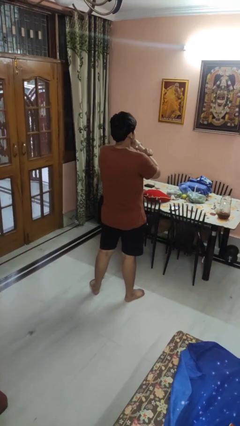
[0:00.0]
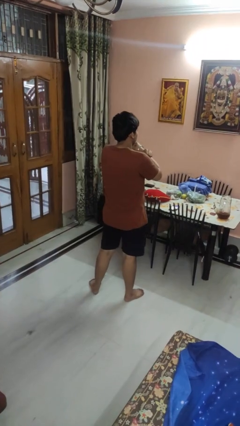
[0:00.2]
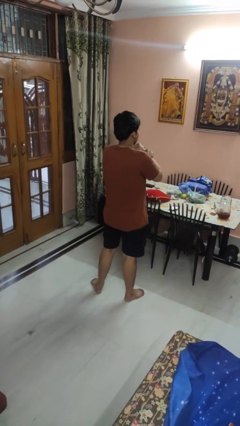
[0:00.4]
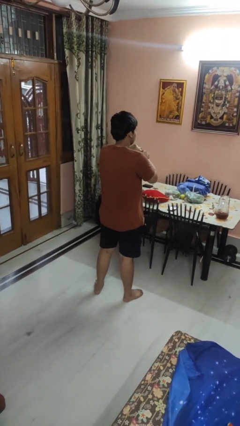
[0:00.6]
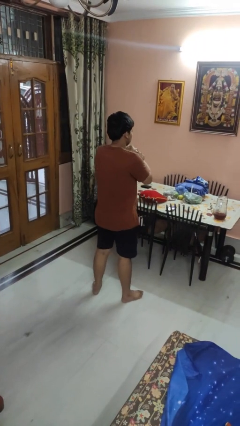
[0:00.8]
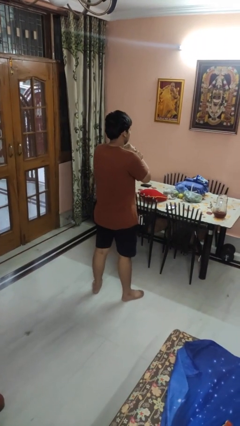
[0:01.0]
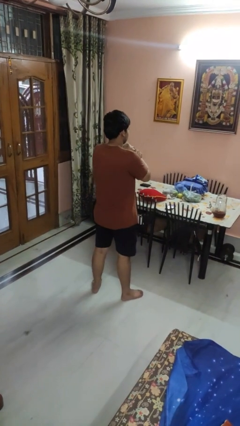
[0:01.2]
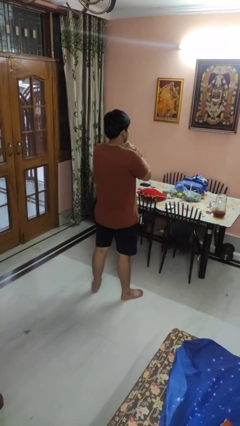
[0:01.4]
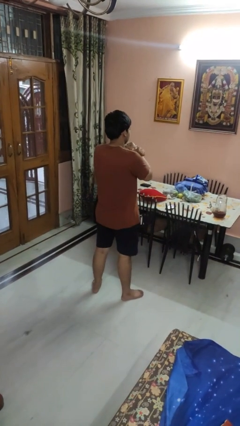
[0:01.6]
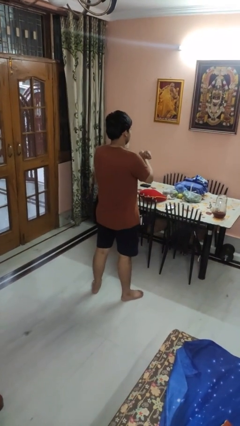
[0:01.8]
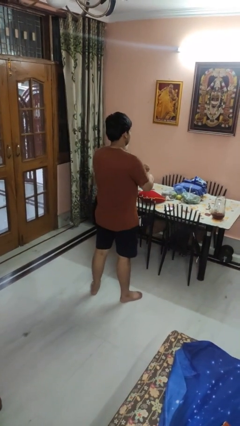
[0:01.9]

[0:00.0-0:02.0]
person gestures arms x

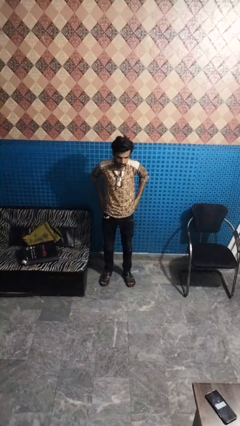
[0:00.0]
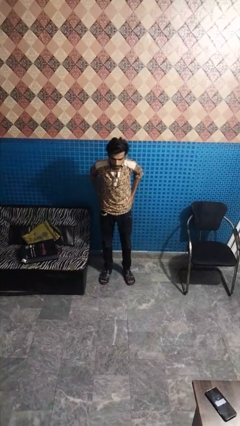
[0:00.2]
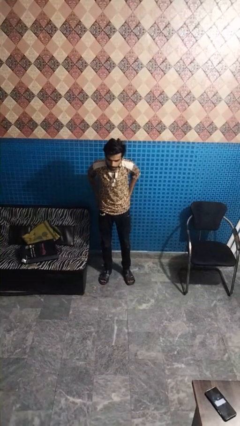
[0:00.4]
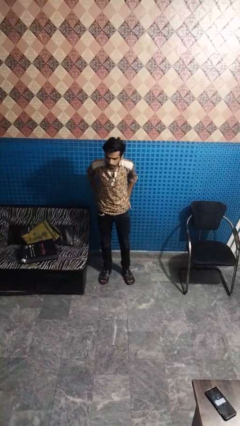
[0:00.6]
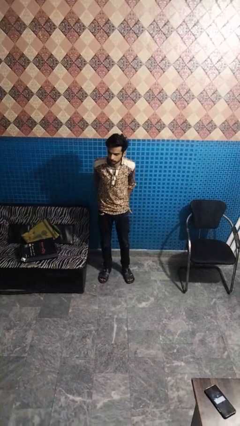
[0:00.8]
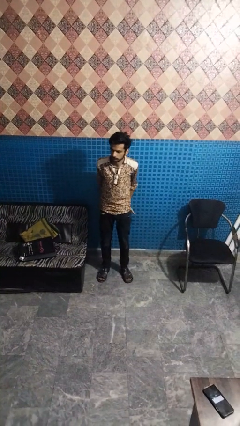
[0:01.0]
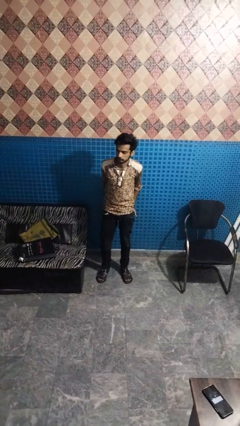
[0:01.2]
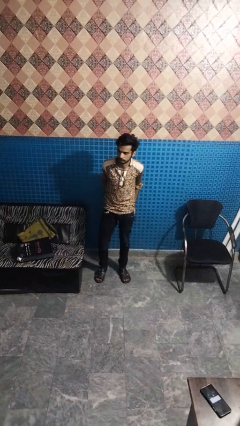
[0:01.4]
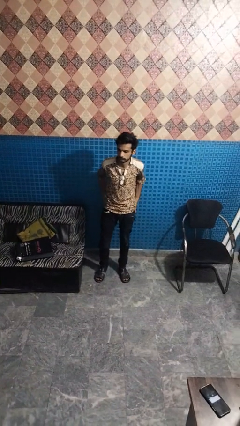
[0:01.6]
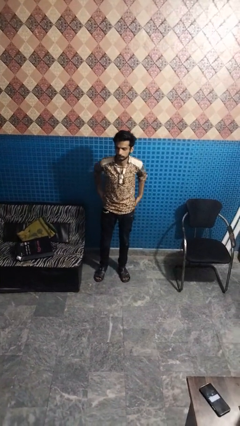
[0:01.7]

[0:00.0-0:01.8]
person puts hands in back pockets

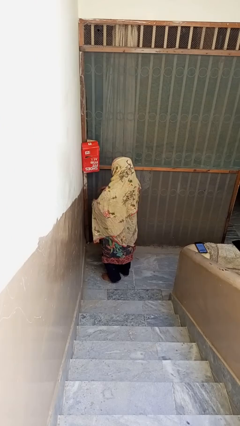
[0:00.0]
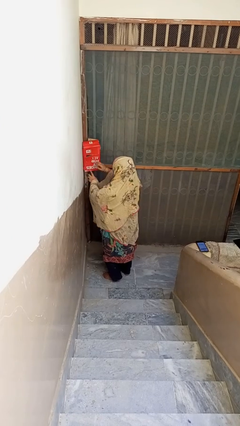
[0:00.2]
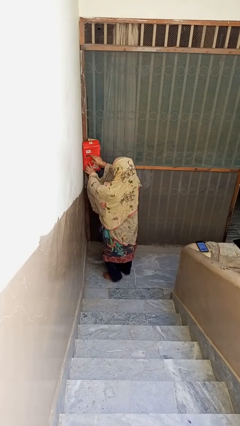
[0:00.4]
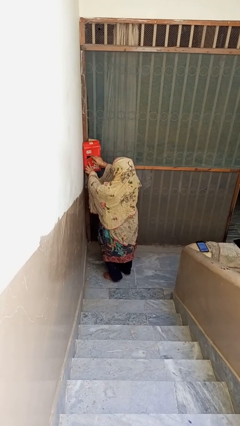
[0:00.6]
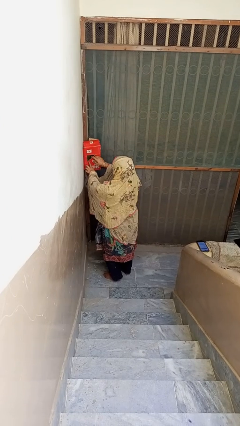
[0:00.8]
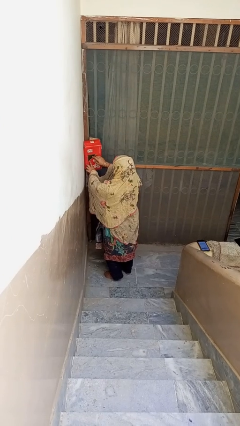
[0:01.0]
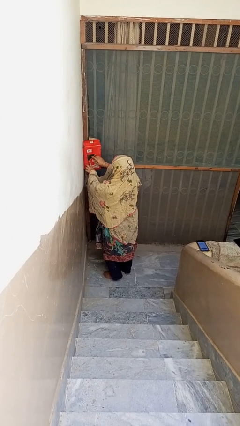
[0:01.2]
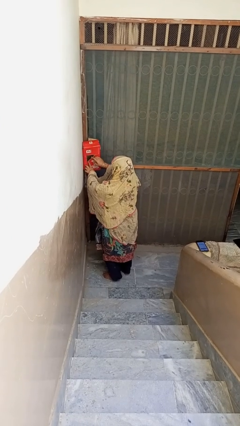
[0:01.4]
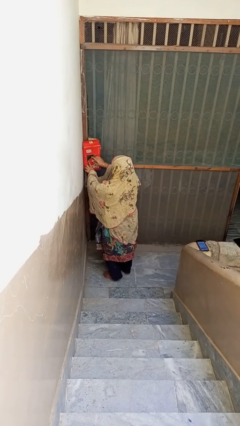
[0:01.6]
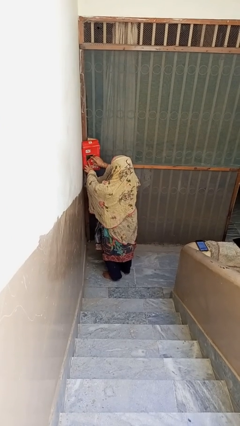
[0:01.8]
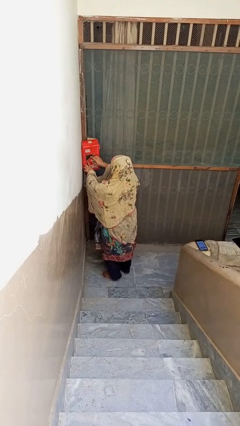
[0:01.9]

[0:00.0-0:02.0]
person opens mailbox

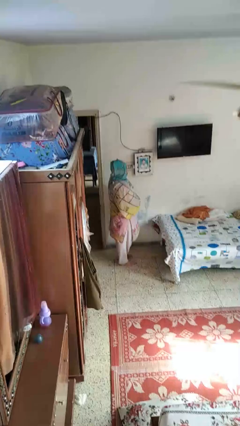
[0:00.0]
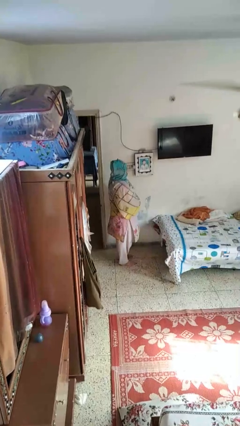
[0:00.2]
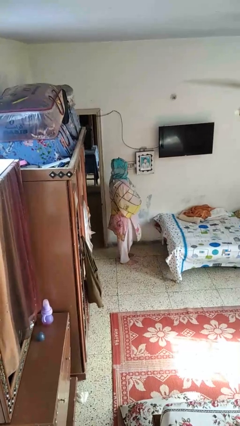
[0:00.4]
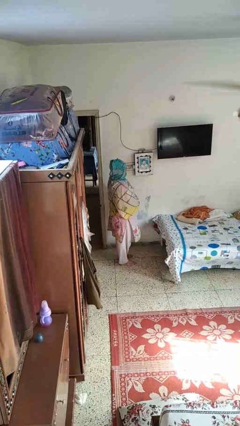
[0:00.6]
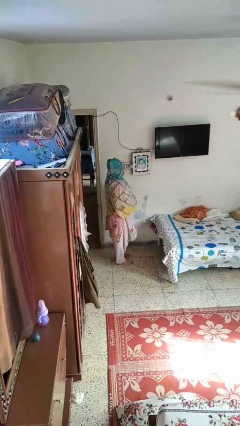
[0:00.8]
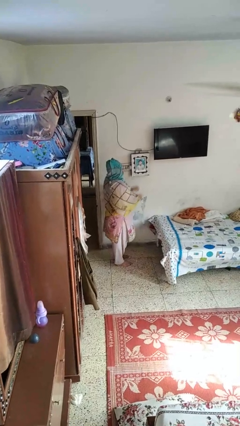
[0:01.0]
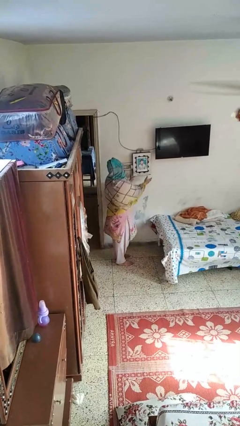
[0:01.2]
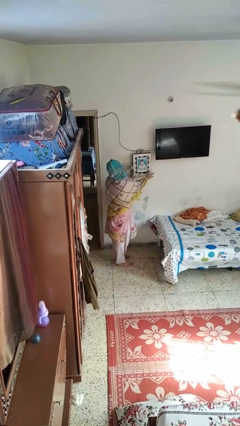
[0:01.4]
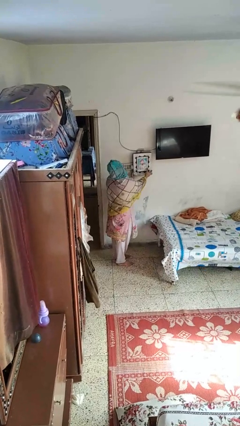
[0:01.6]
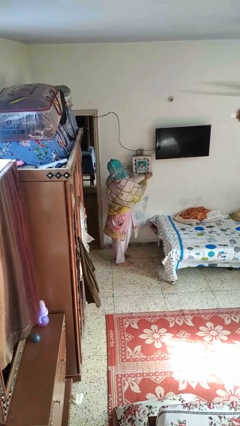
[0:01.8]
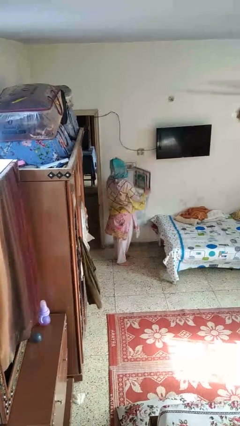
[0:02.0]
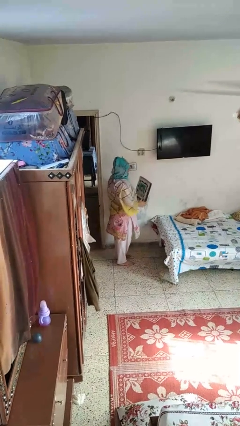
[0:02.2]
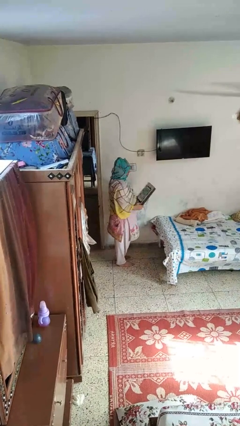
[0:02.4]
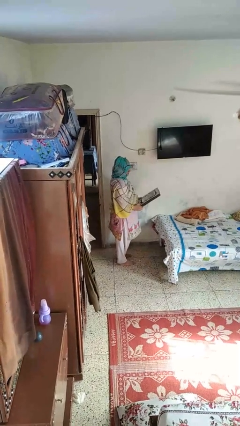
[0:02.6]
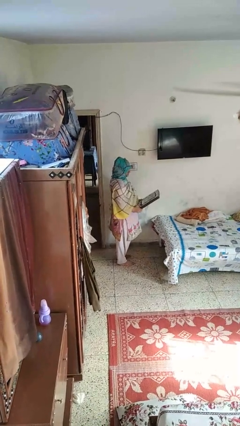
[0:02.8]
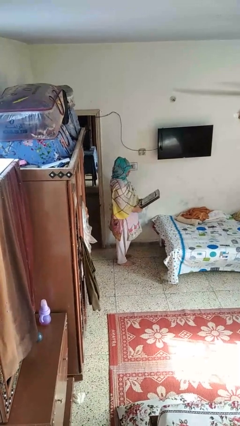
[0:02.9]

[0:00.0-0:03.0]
person takes down picture frame

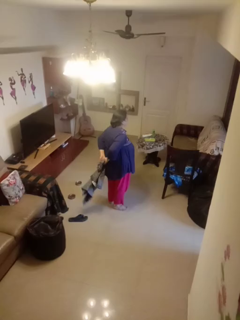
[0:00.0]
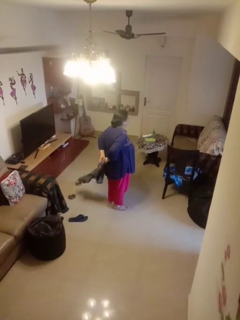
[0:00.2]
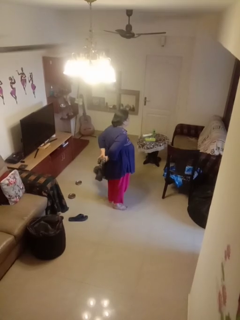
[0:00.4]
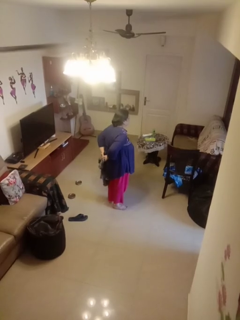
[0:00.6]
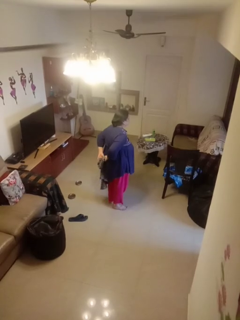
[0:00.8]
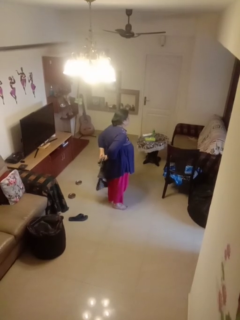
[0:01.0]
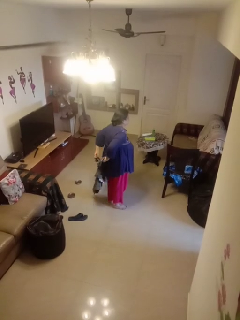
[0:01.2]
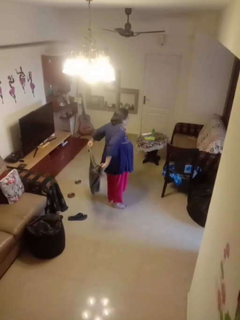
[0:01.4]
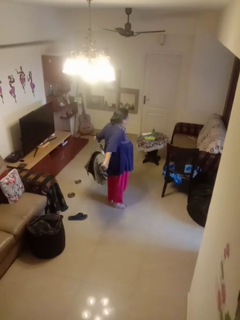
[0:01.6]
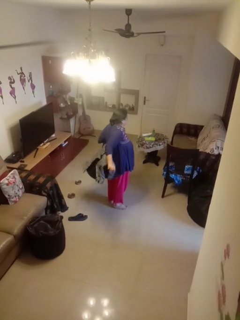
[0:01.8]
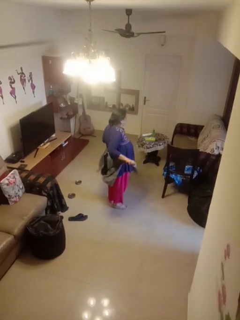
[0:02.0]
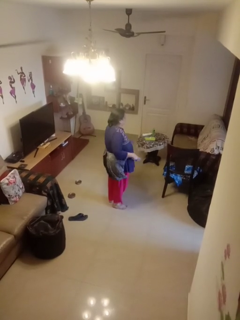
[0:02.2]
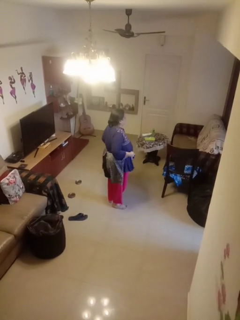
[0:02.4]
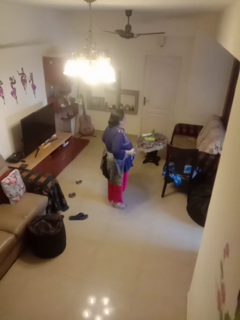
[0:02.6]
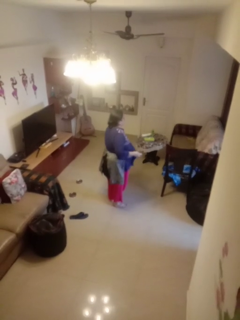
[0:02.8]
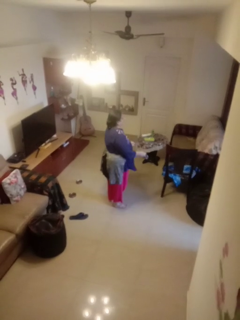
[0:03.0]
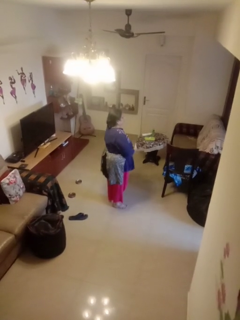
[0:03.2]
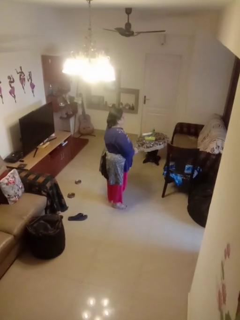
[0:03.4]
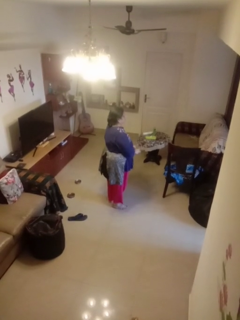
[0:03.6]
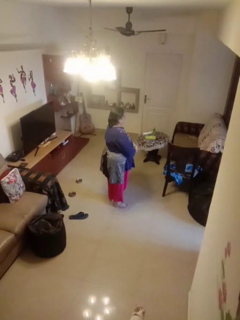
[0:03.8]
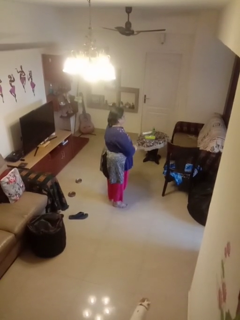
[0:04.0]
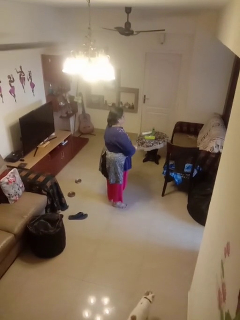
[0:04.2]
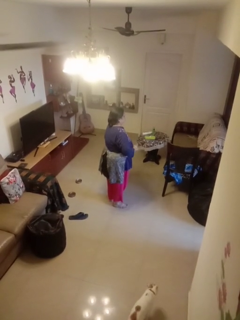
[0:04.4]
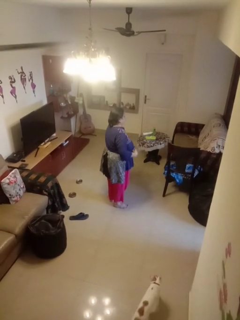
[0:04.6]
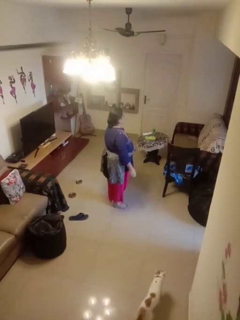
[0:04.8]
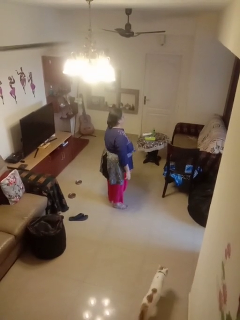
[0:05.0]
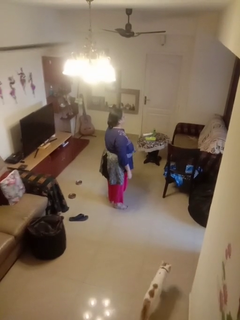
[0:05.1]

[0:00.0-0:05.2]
person ties jacket around waist

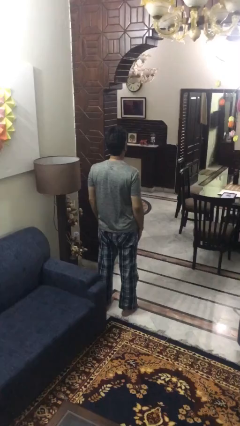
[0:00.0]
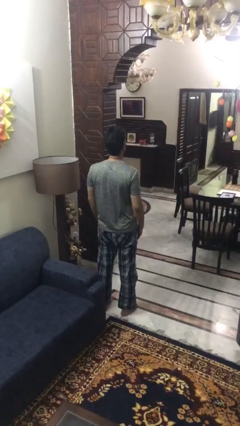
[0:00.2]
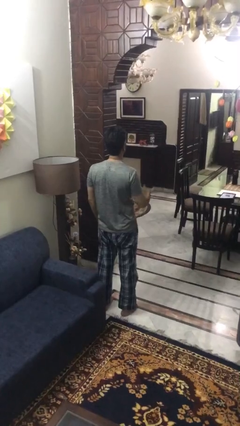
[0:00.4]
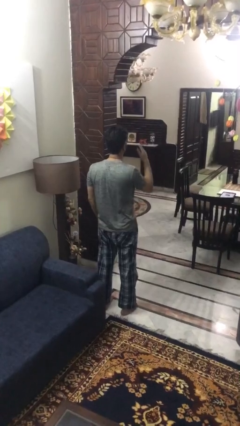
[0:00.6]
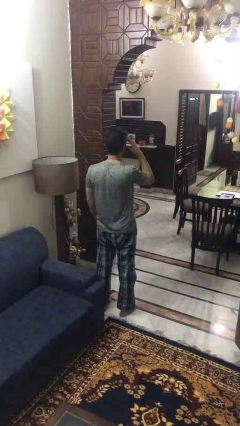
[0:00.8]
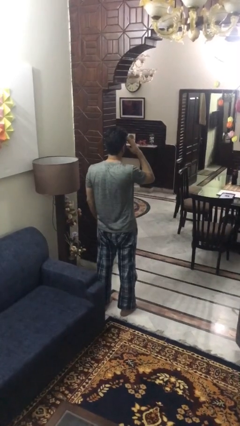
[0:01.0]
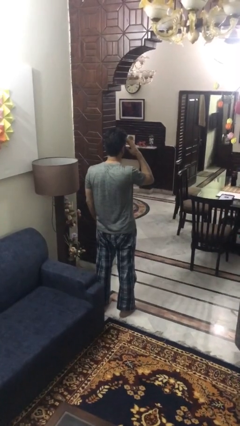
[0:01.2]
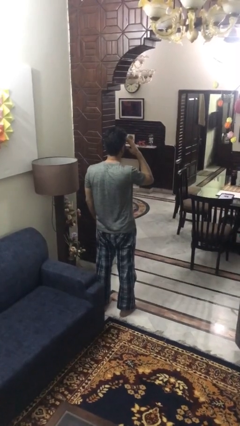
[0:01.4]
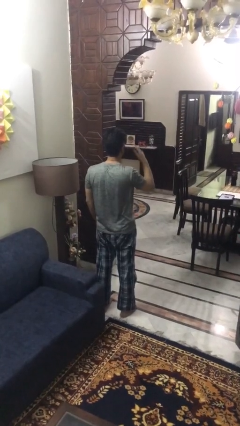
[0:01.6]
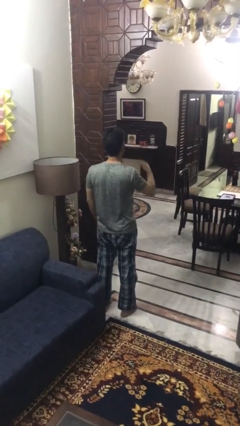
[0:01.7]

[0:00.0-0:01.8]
person salutes

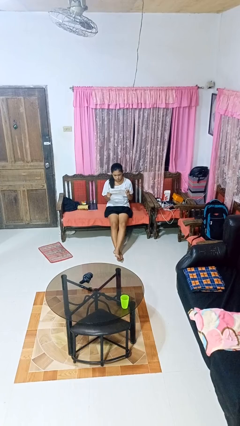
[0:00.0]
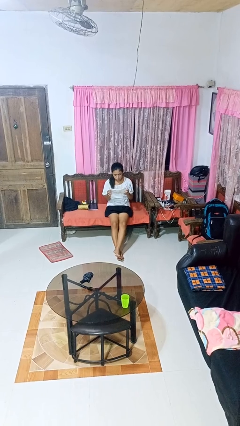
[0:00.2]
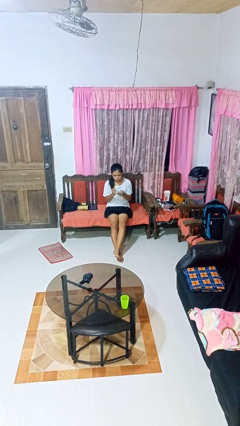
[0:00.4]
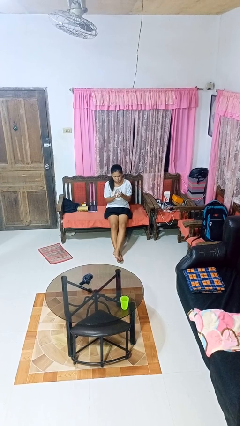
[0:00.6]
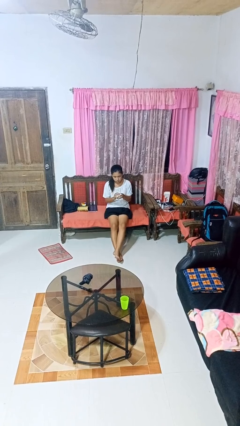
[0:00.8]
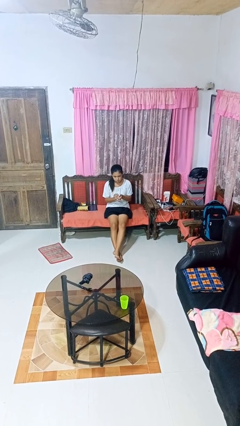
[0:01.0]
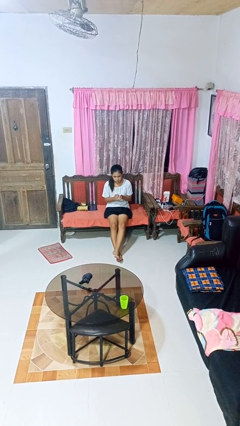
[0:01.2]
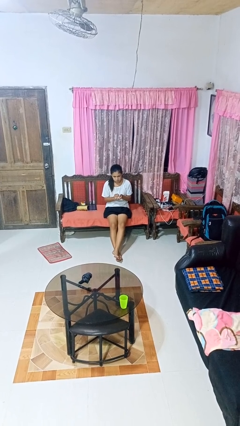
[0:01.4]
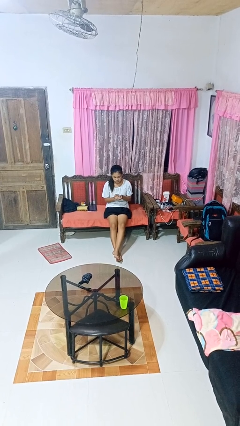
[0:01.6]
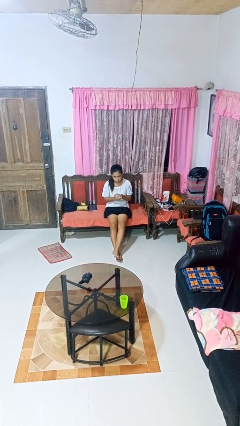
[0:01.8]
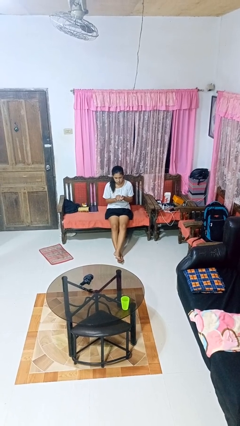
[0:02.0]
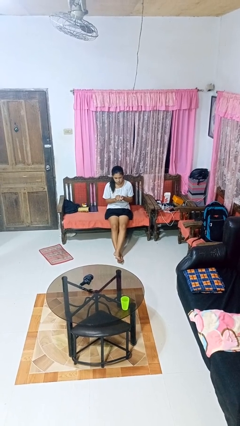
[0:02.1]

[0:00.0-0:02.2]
person crumples paper
